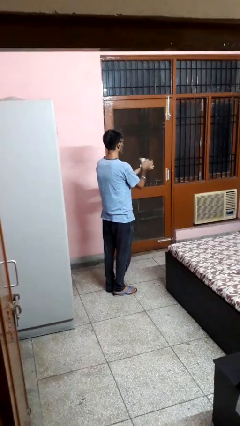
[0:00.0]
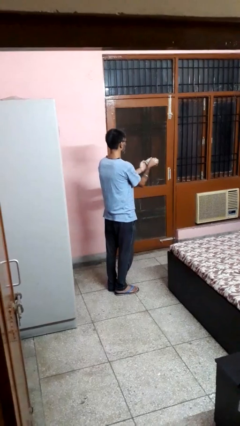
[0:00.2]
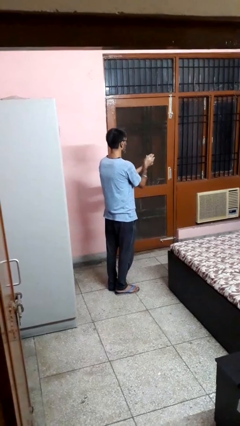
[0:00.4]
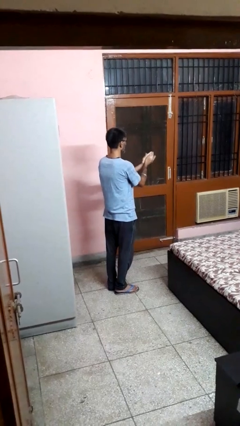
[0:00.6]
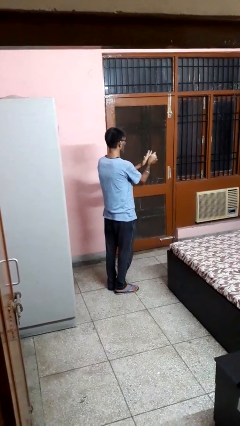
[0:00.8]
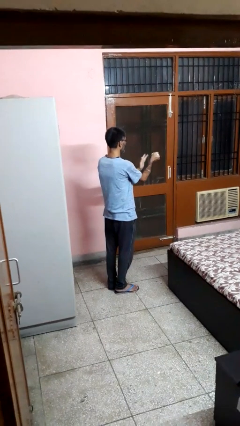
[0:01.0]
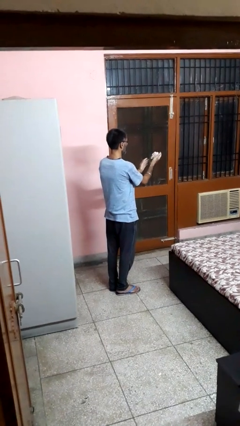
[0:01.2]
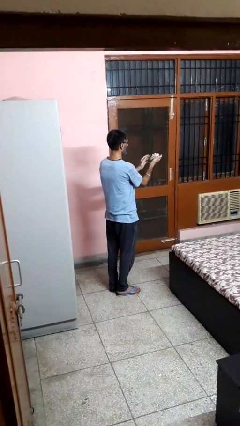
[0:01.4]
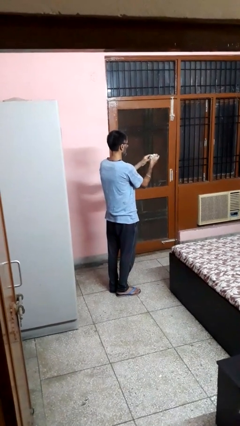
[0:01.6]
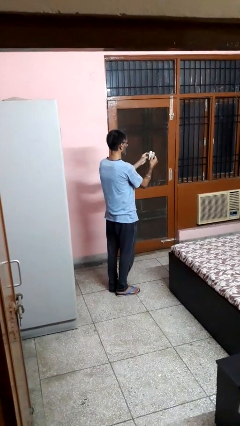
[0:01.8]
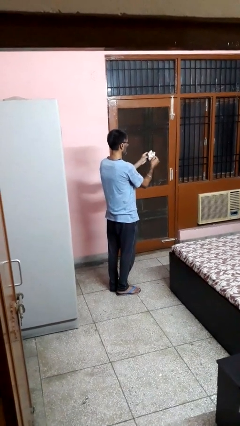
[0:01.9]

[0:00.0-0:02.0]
person crumples paper

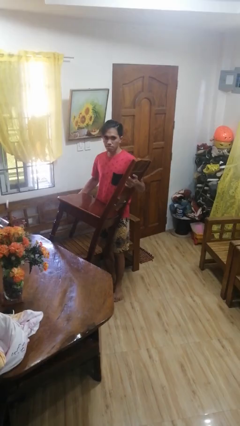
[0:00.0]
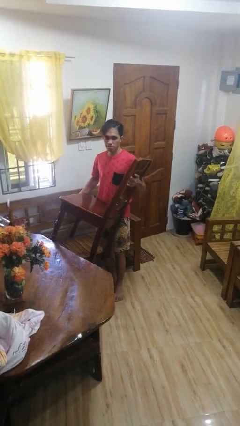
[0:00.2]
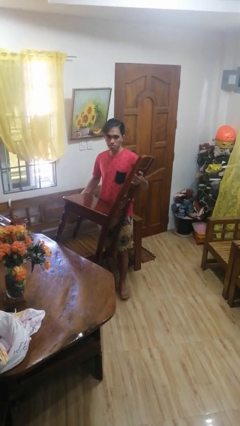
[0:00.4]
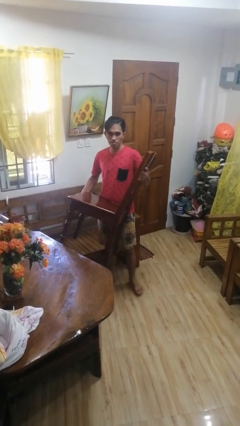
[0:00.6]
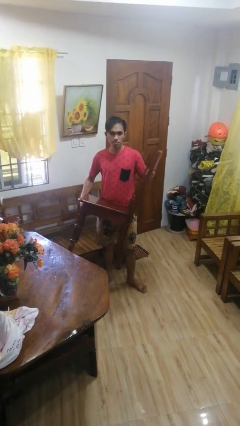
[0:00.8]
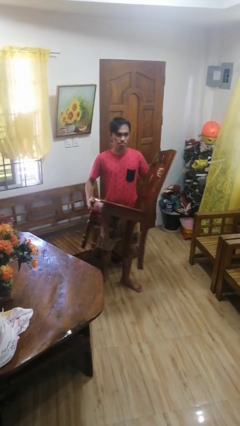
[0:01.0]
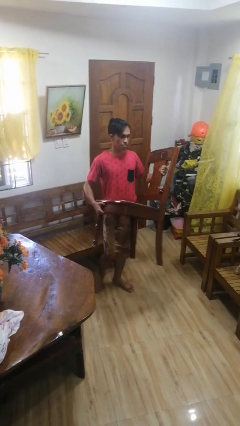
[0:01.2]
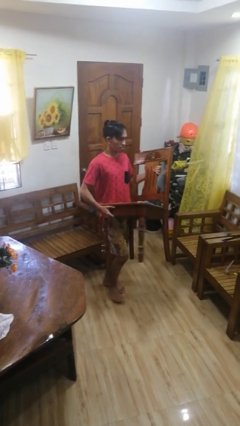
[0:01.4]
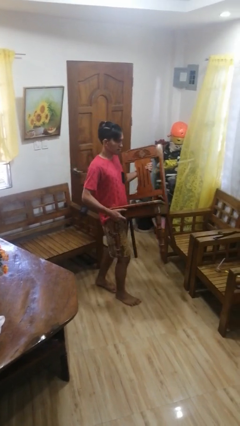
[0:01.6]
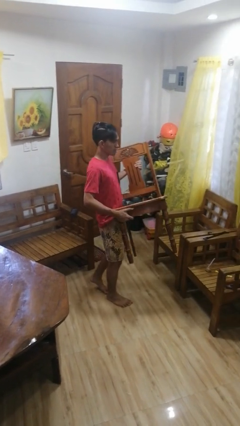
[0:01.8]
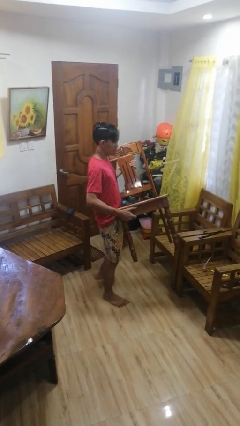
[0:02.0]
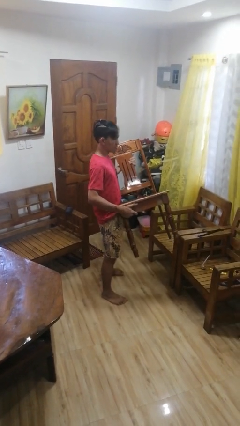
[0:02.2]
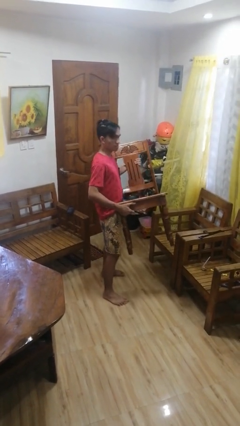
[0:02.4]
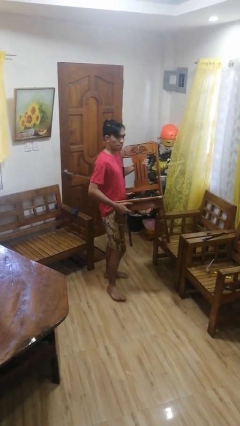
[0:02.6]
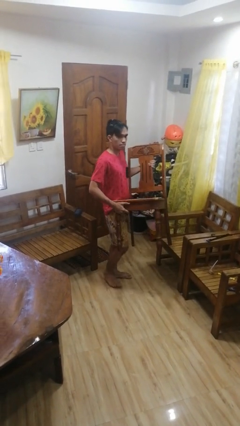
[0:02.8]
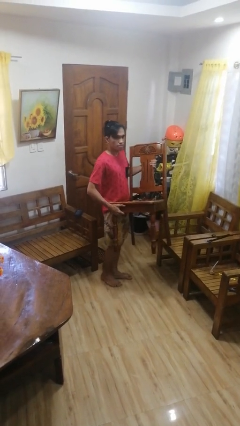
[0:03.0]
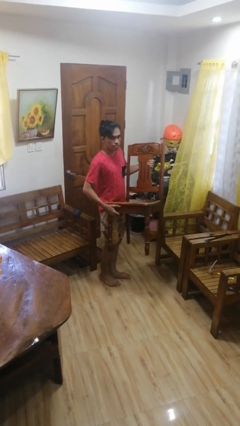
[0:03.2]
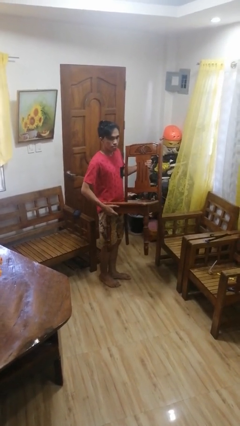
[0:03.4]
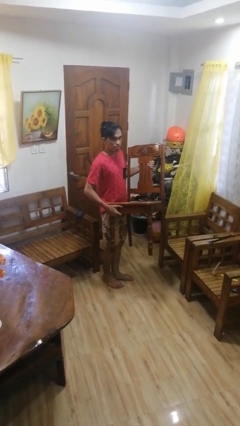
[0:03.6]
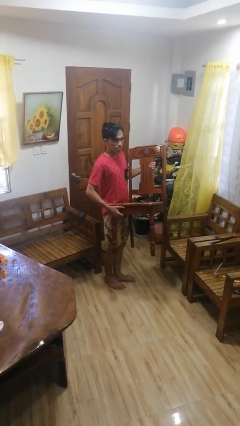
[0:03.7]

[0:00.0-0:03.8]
person carries furniture

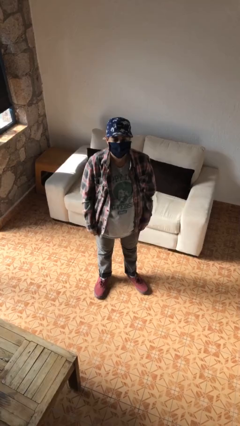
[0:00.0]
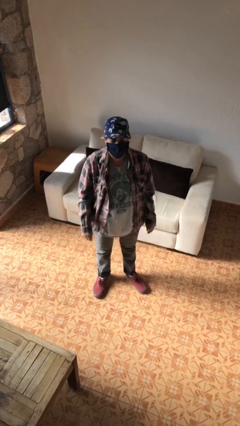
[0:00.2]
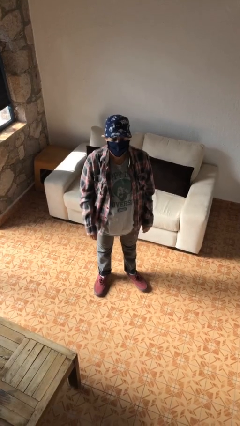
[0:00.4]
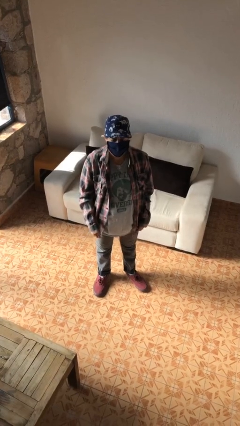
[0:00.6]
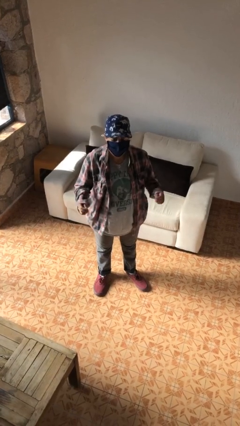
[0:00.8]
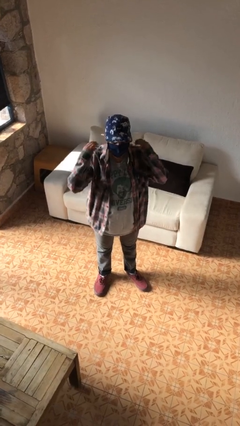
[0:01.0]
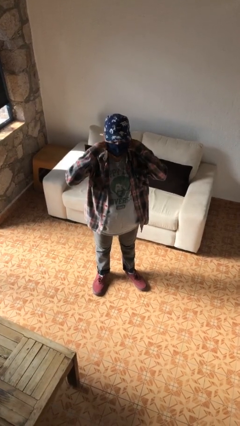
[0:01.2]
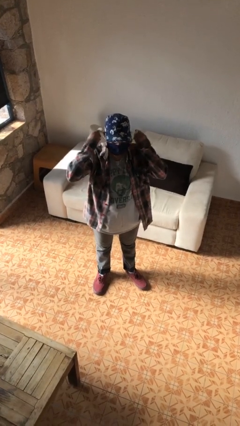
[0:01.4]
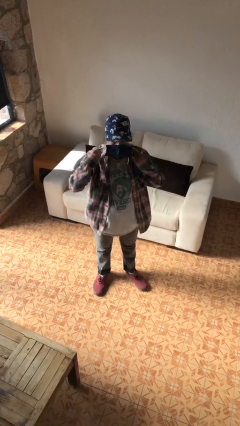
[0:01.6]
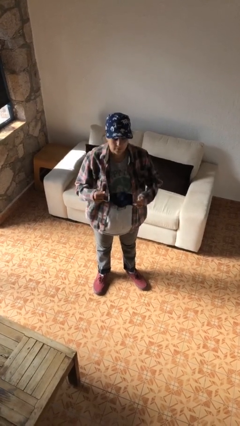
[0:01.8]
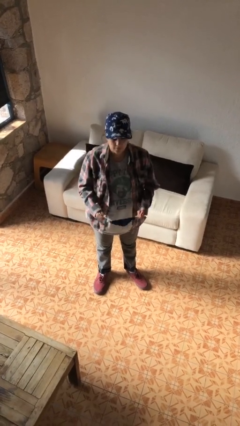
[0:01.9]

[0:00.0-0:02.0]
person takes off facemask

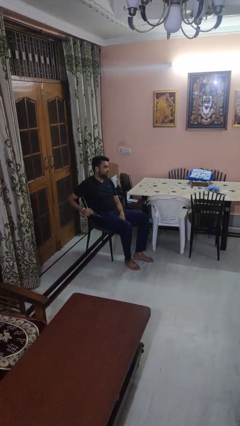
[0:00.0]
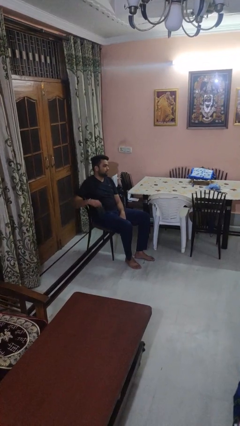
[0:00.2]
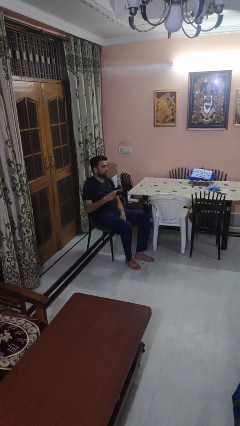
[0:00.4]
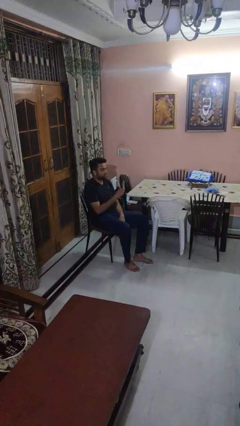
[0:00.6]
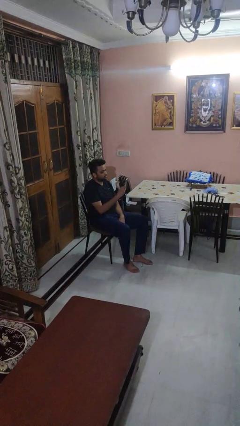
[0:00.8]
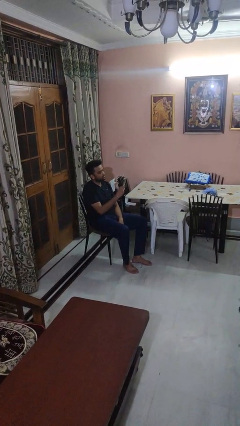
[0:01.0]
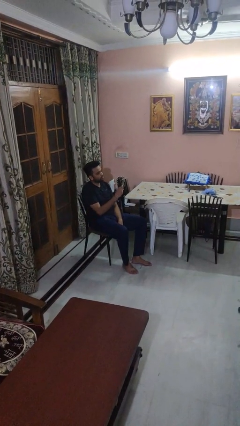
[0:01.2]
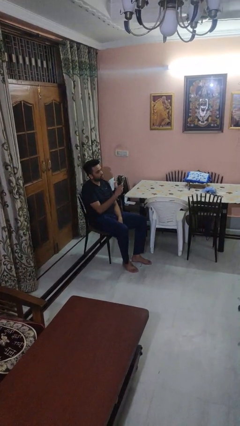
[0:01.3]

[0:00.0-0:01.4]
person takes phone from pocket

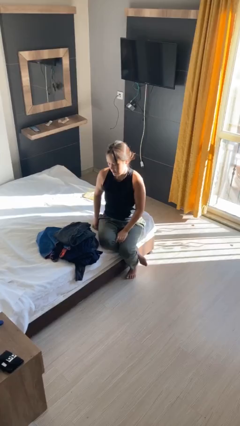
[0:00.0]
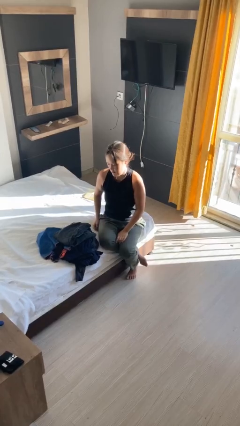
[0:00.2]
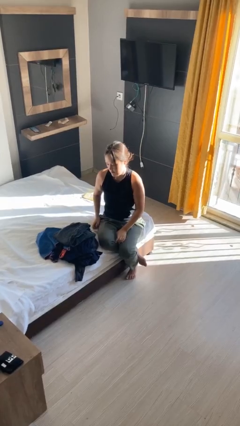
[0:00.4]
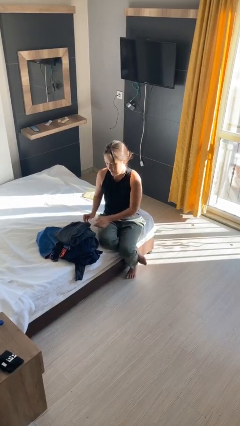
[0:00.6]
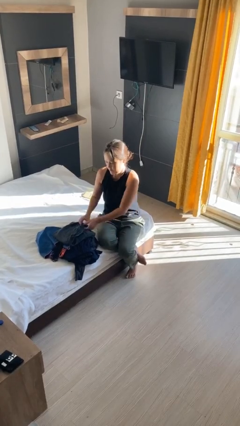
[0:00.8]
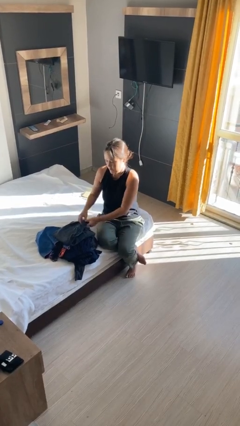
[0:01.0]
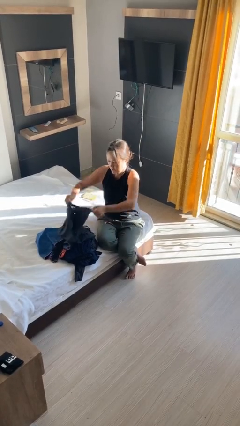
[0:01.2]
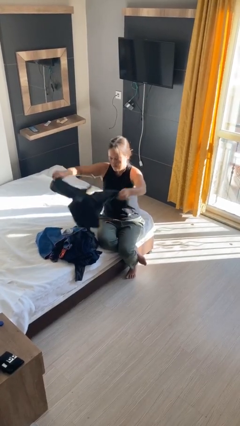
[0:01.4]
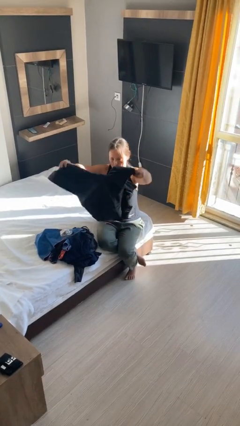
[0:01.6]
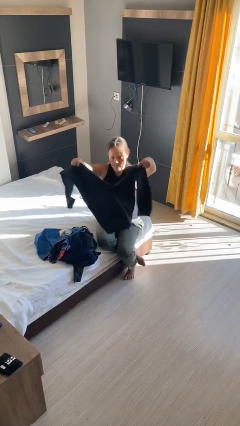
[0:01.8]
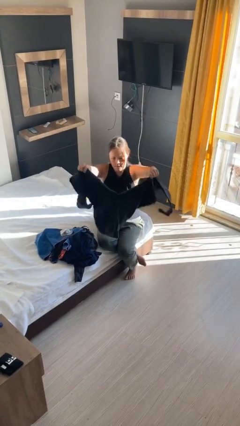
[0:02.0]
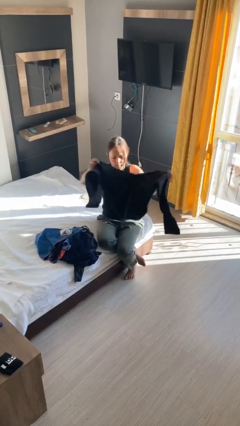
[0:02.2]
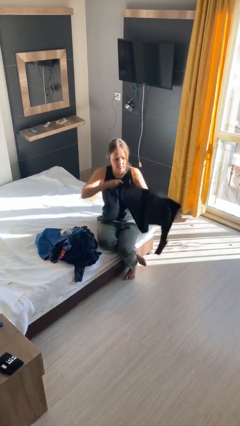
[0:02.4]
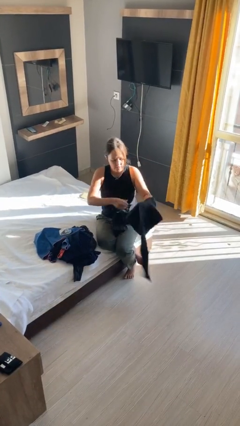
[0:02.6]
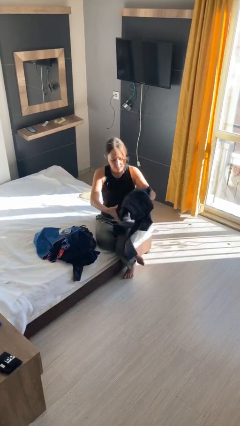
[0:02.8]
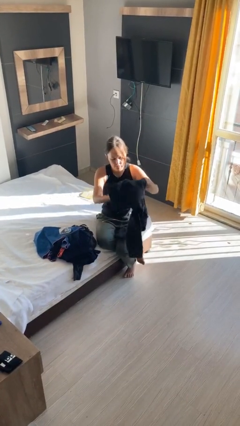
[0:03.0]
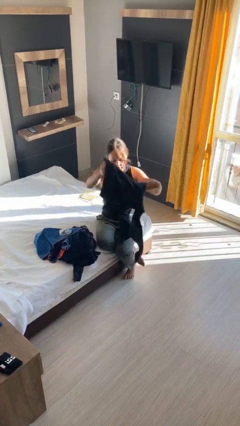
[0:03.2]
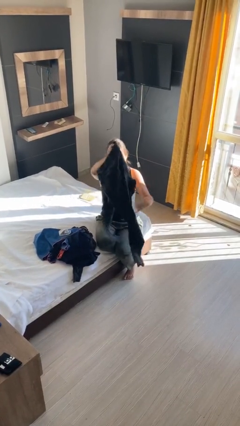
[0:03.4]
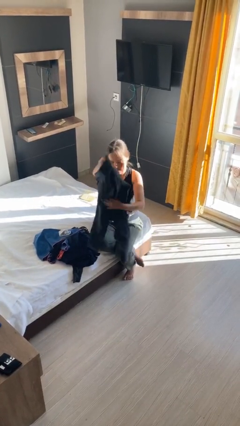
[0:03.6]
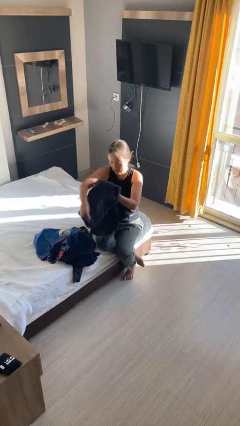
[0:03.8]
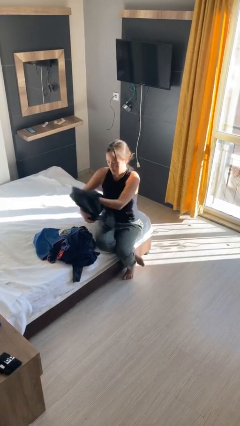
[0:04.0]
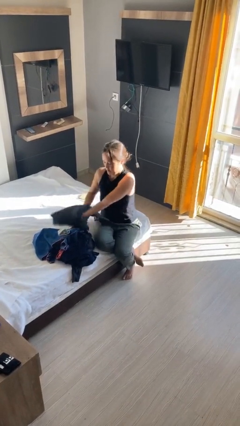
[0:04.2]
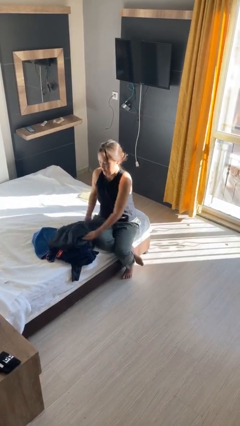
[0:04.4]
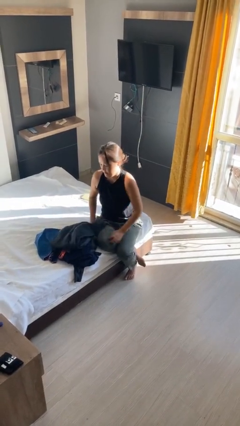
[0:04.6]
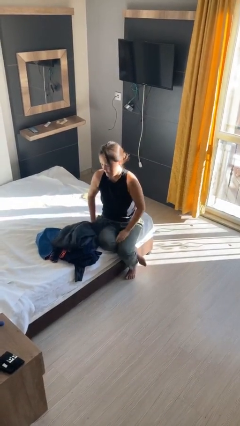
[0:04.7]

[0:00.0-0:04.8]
person folds pants

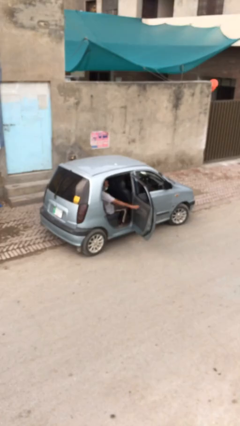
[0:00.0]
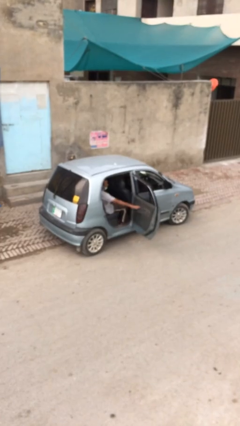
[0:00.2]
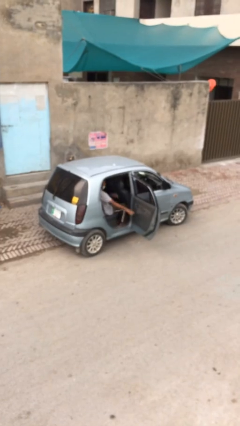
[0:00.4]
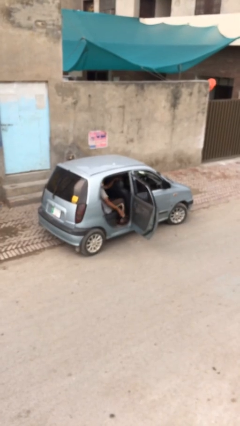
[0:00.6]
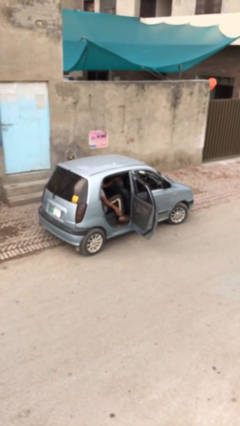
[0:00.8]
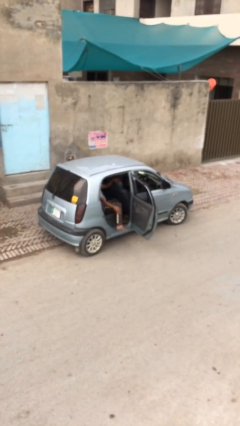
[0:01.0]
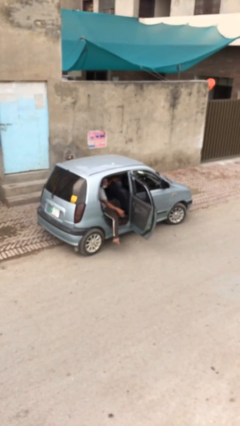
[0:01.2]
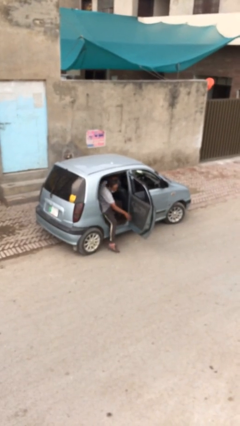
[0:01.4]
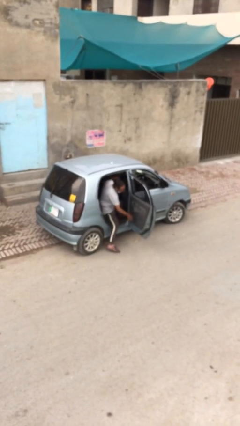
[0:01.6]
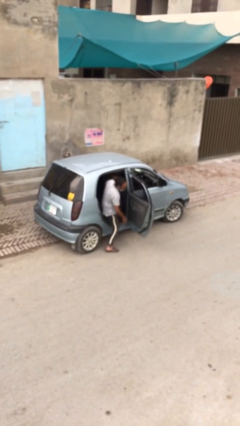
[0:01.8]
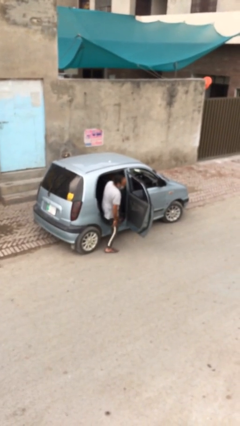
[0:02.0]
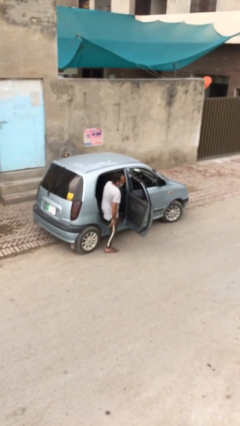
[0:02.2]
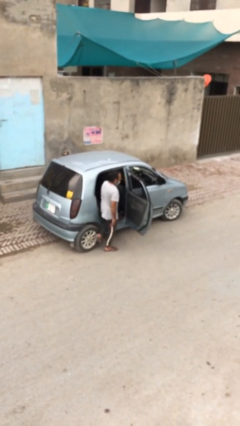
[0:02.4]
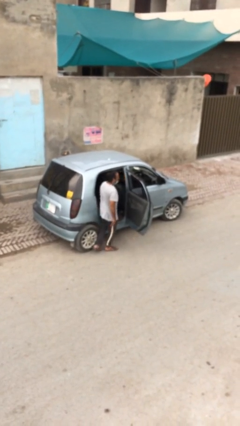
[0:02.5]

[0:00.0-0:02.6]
person exits car

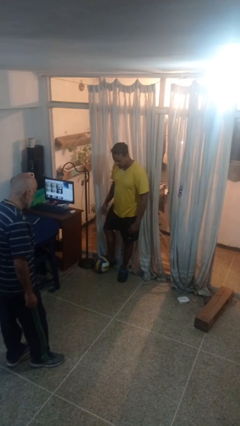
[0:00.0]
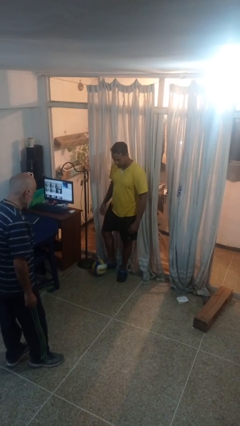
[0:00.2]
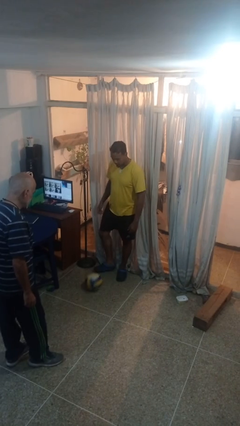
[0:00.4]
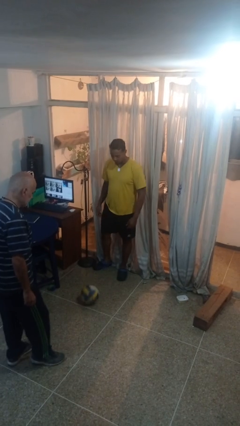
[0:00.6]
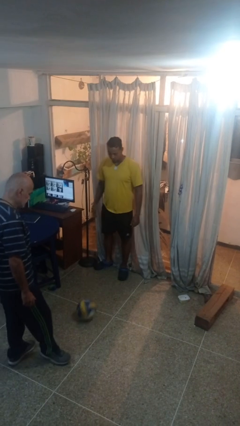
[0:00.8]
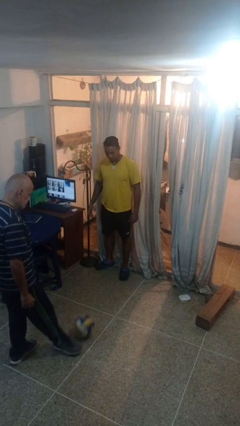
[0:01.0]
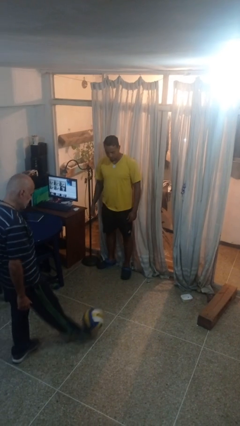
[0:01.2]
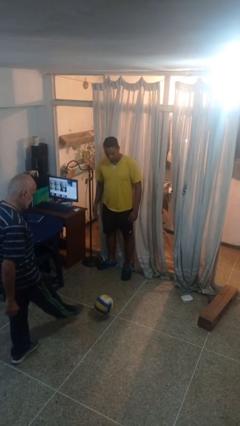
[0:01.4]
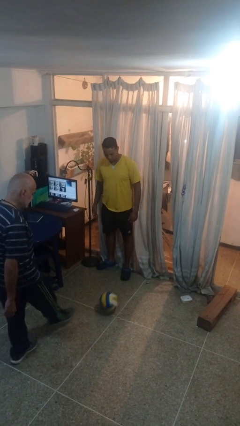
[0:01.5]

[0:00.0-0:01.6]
person kicks object to person
